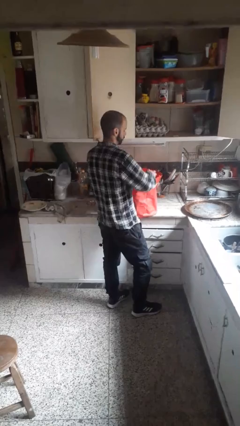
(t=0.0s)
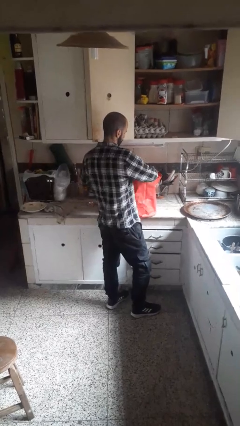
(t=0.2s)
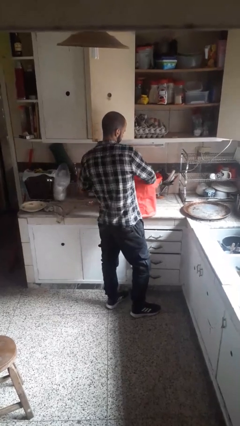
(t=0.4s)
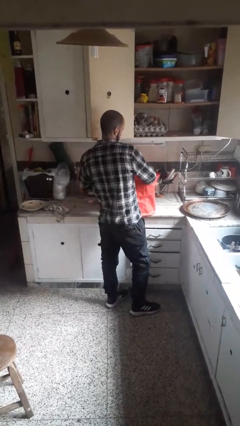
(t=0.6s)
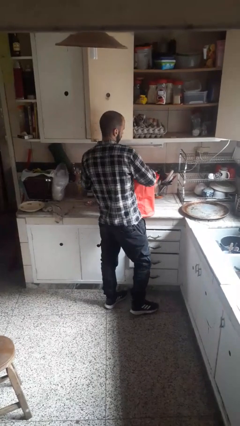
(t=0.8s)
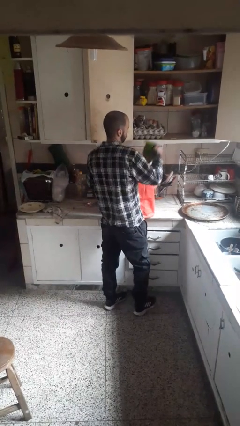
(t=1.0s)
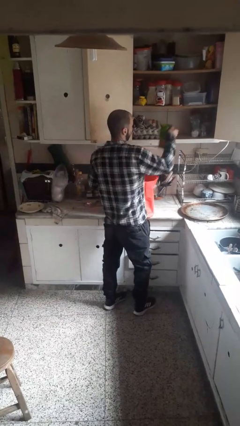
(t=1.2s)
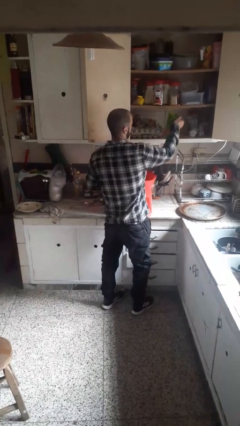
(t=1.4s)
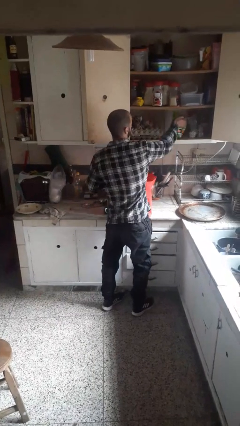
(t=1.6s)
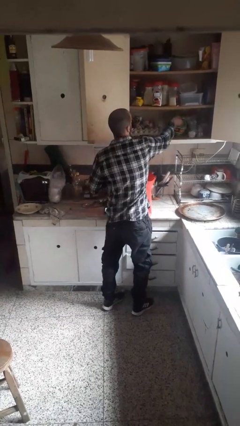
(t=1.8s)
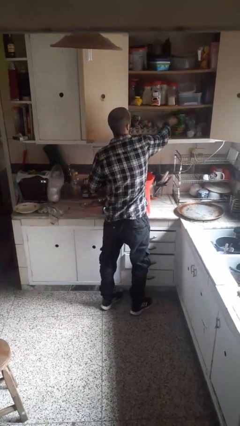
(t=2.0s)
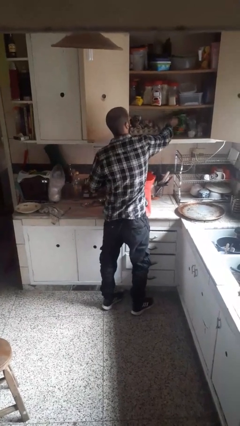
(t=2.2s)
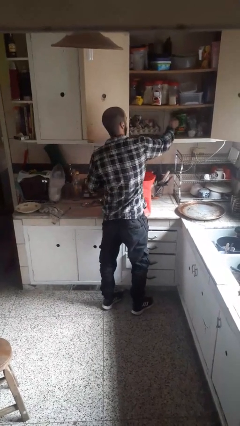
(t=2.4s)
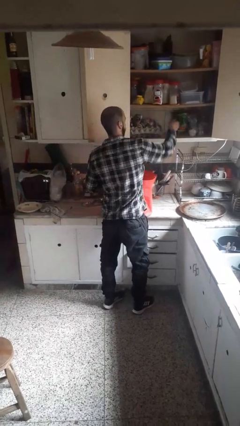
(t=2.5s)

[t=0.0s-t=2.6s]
person loads groceries into cabinet

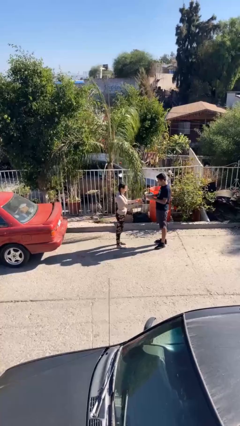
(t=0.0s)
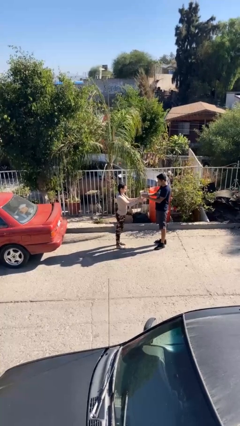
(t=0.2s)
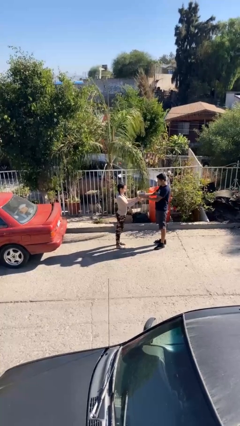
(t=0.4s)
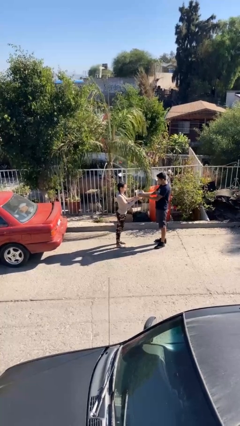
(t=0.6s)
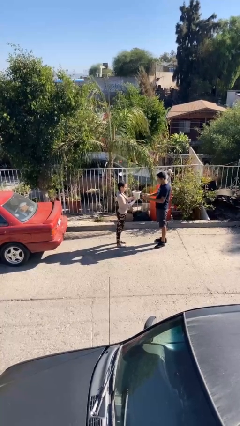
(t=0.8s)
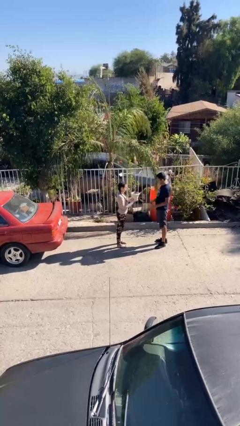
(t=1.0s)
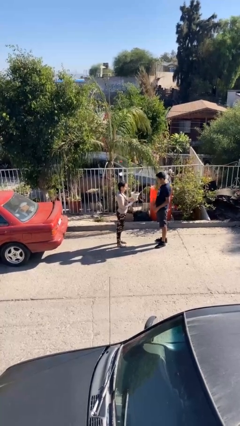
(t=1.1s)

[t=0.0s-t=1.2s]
person transfers object to person

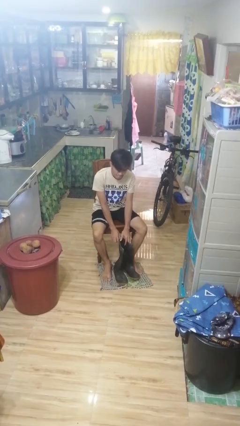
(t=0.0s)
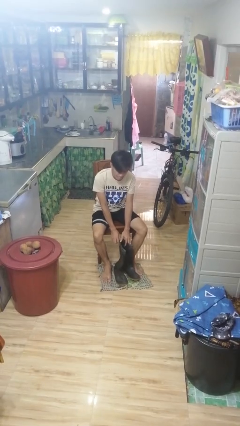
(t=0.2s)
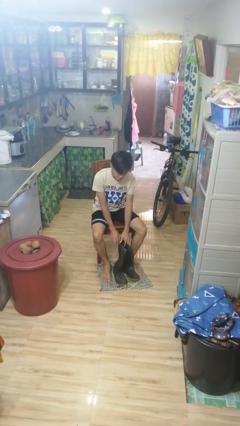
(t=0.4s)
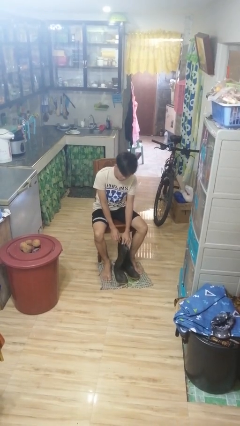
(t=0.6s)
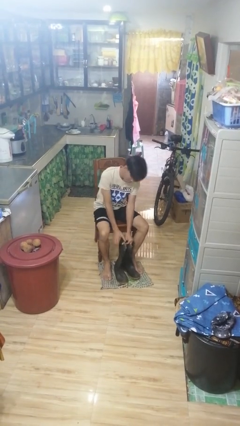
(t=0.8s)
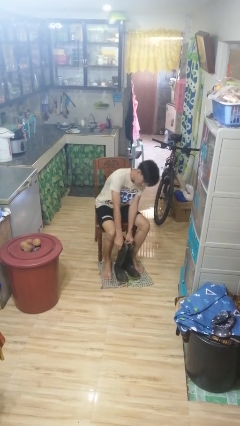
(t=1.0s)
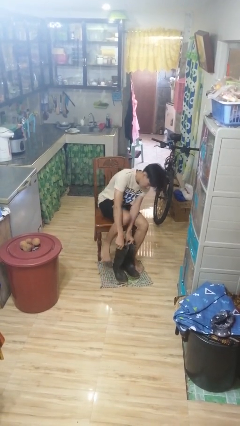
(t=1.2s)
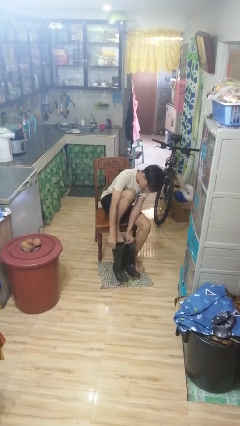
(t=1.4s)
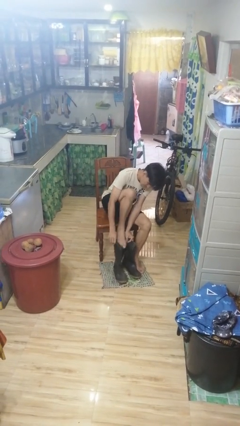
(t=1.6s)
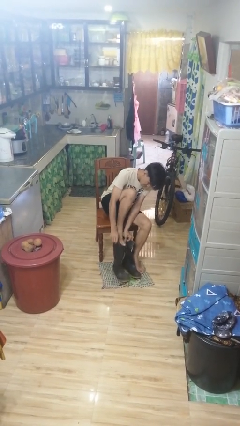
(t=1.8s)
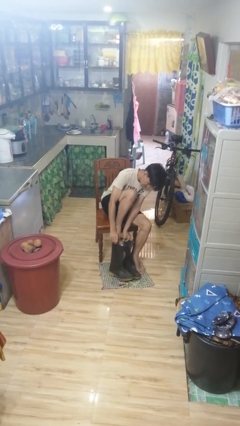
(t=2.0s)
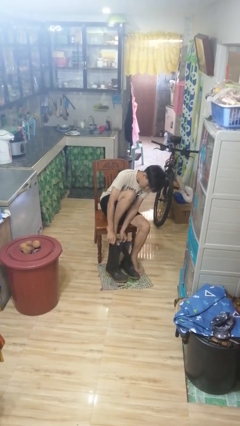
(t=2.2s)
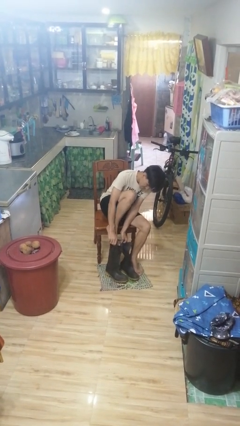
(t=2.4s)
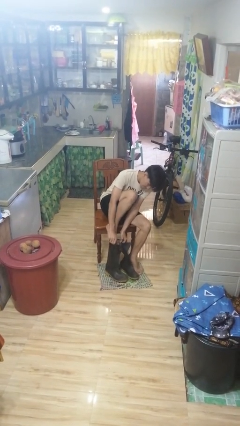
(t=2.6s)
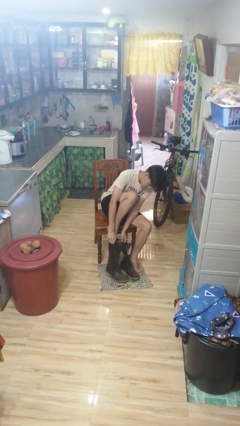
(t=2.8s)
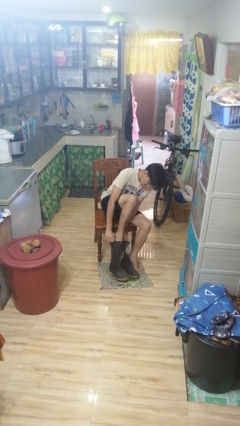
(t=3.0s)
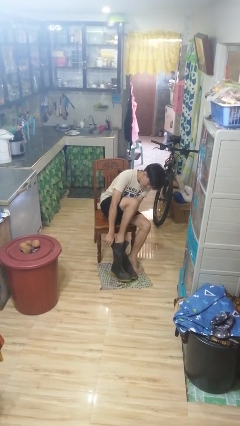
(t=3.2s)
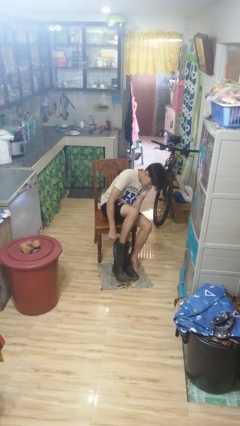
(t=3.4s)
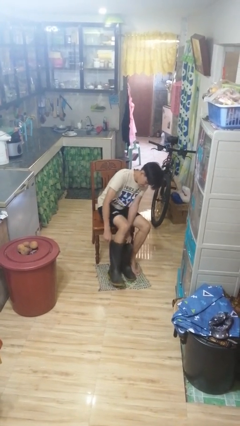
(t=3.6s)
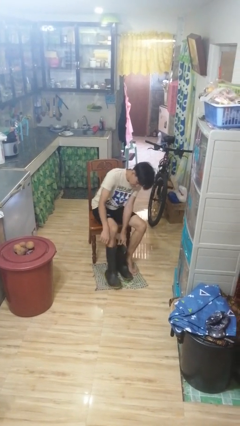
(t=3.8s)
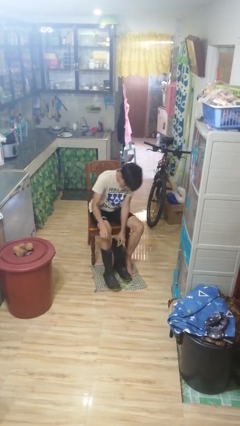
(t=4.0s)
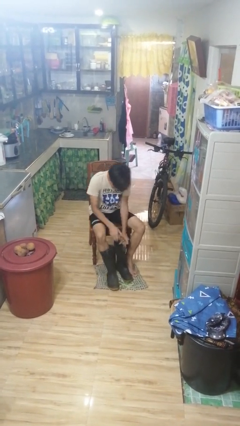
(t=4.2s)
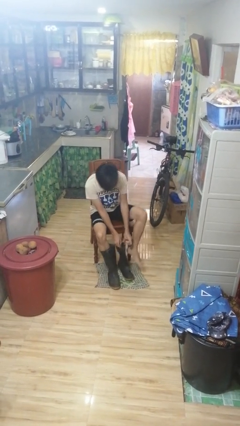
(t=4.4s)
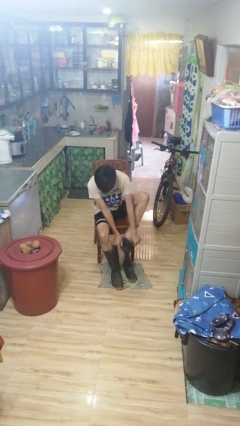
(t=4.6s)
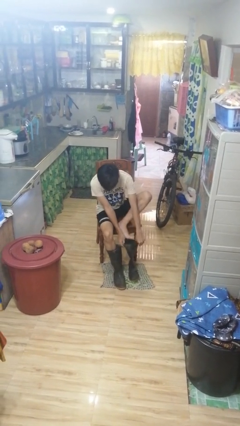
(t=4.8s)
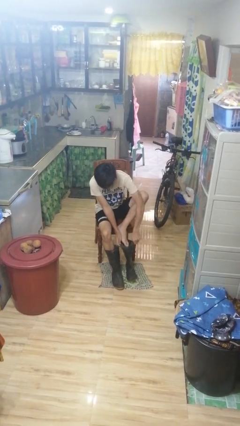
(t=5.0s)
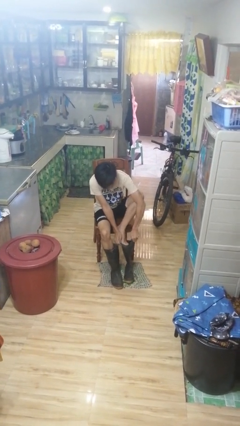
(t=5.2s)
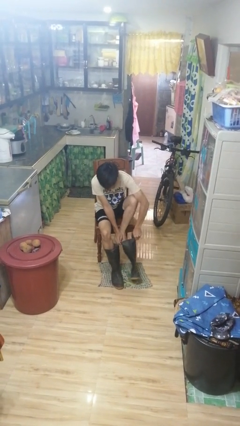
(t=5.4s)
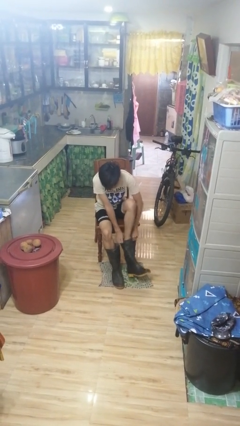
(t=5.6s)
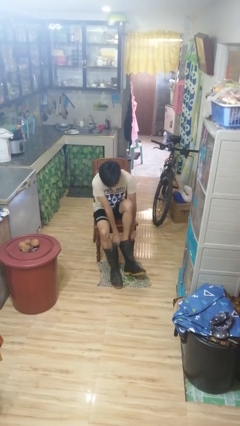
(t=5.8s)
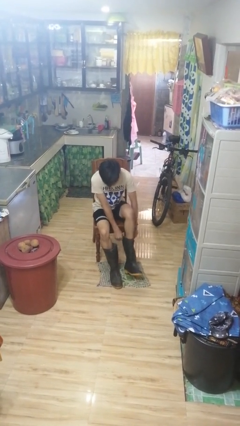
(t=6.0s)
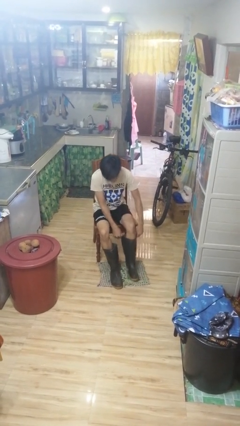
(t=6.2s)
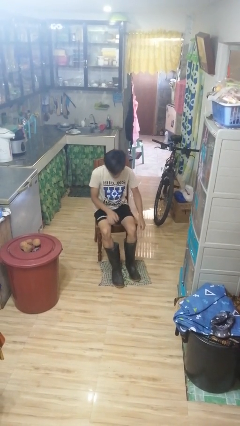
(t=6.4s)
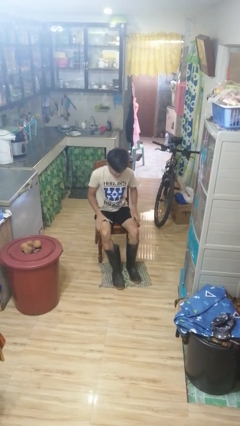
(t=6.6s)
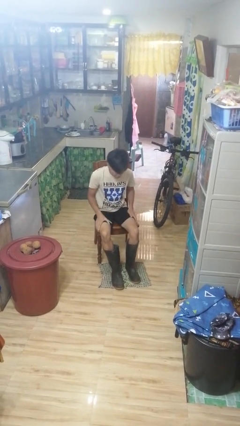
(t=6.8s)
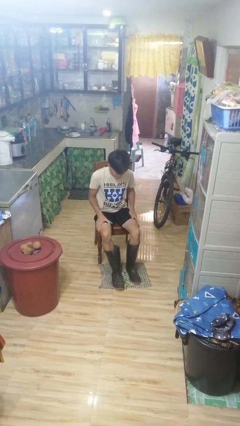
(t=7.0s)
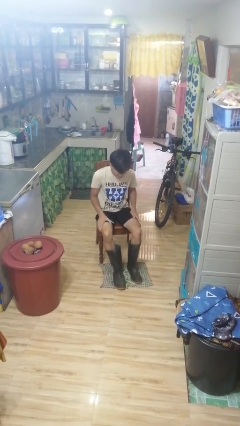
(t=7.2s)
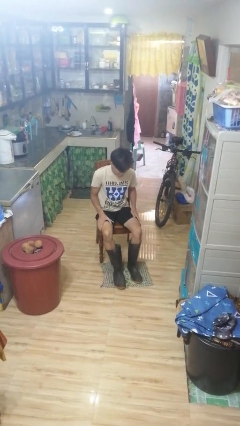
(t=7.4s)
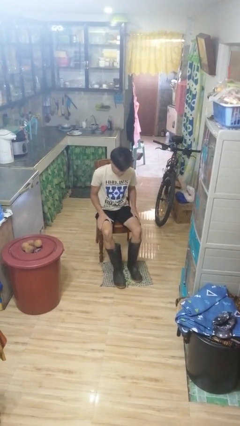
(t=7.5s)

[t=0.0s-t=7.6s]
person puts on boots

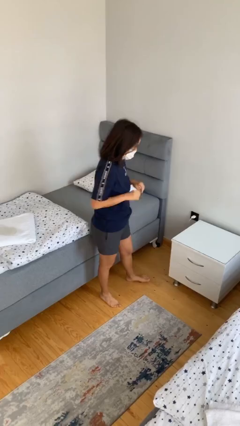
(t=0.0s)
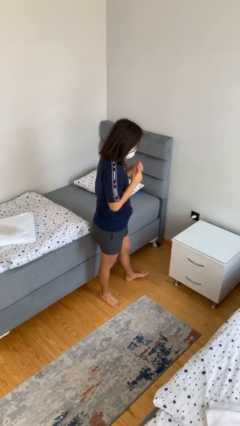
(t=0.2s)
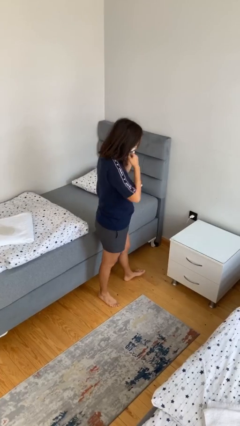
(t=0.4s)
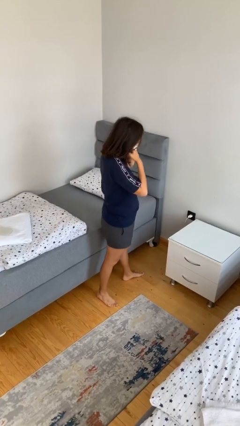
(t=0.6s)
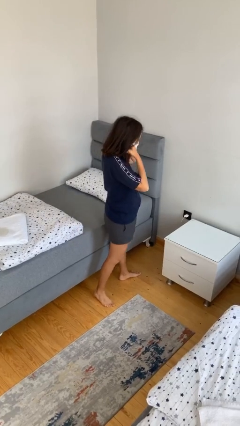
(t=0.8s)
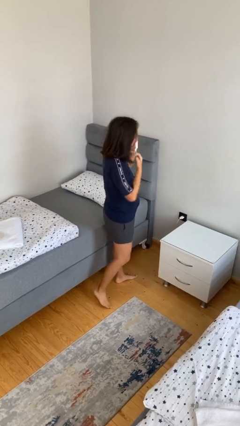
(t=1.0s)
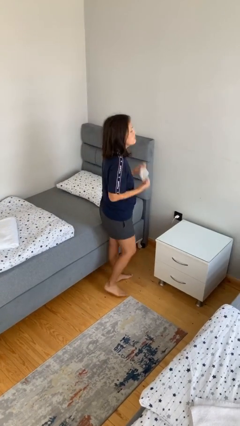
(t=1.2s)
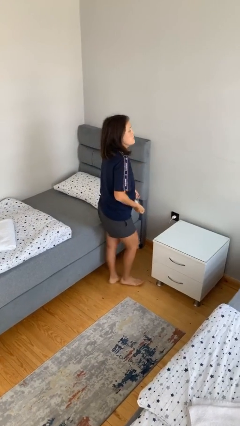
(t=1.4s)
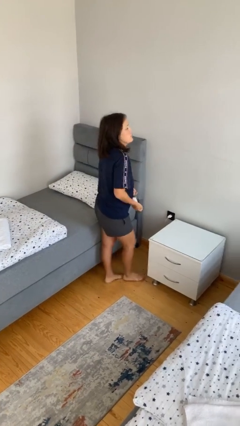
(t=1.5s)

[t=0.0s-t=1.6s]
person takes off facemask

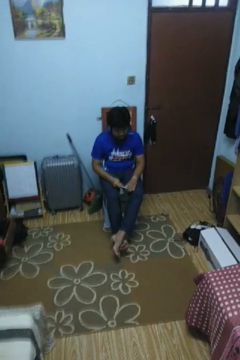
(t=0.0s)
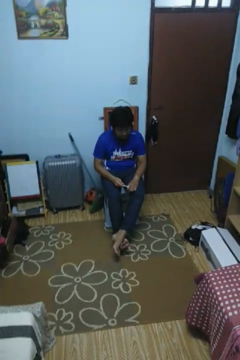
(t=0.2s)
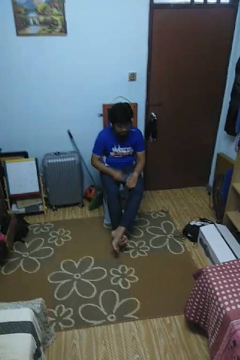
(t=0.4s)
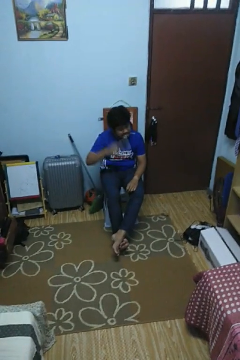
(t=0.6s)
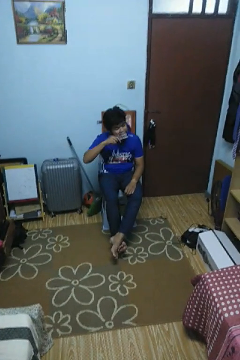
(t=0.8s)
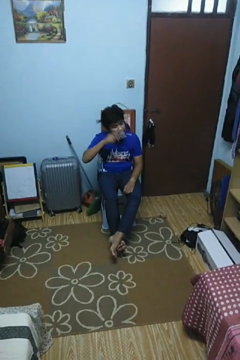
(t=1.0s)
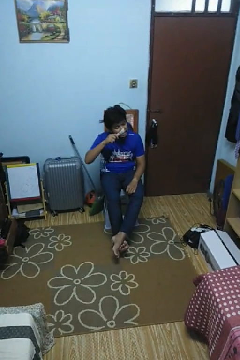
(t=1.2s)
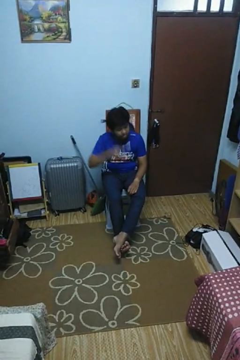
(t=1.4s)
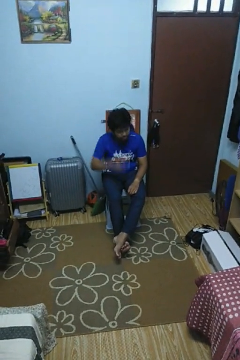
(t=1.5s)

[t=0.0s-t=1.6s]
person brushes teeth

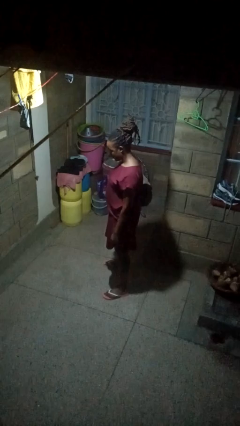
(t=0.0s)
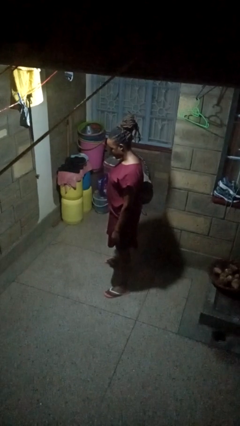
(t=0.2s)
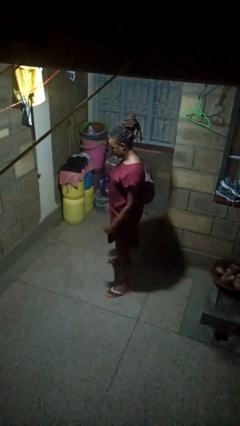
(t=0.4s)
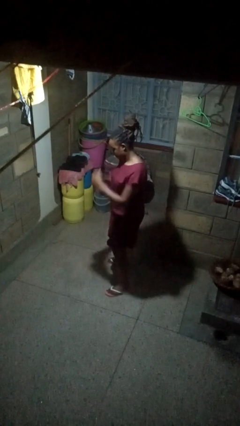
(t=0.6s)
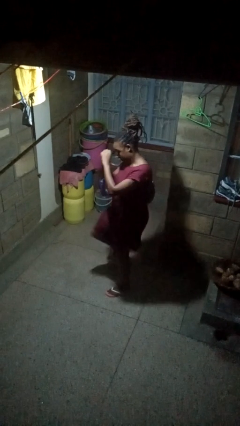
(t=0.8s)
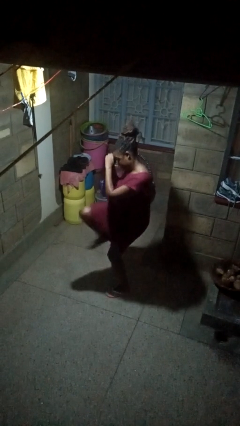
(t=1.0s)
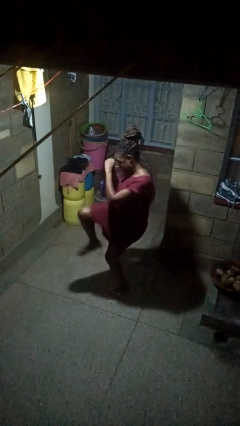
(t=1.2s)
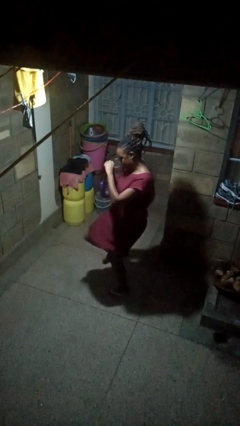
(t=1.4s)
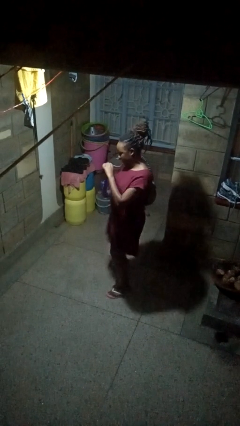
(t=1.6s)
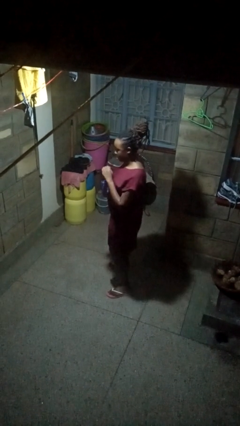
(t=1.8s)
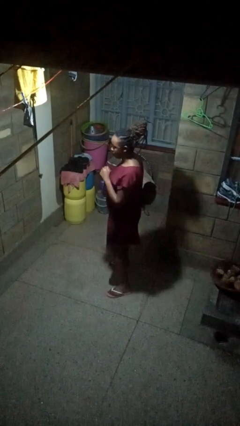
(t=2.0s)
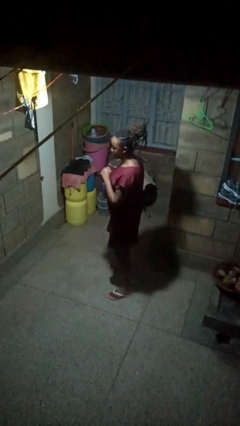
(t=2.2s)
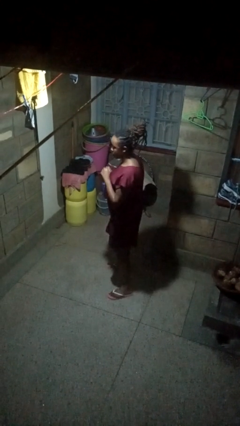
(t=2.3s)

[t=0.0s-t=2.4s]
person karate kicks

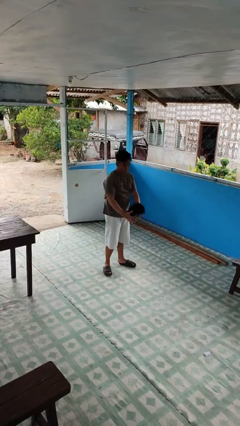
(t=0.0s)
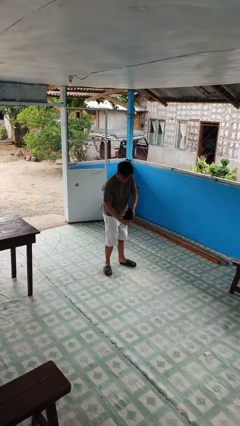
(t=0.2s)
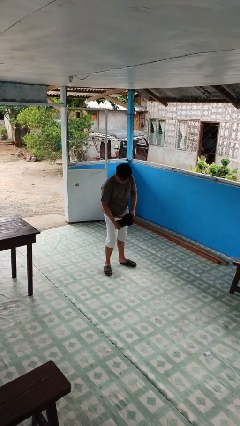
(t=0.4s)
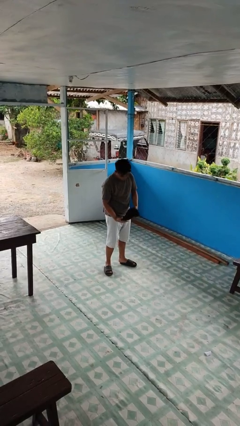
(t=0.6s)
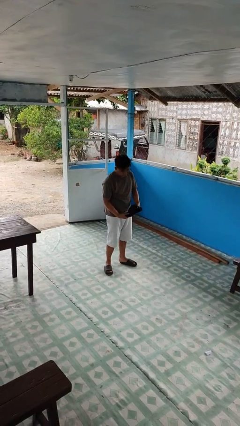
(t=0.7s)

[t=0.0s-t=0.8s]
person catches dropped object
